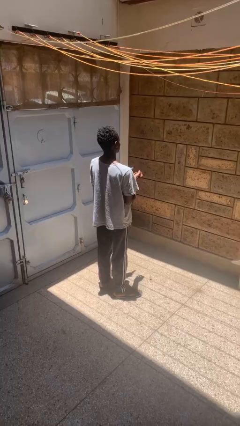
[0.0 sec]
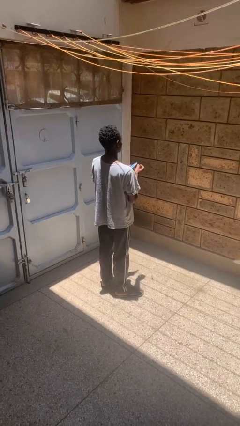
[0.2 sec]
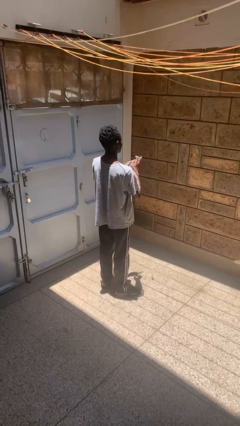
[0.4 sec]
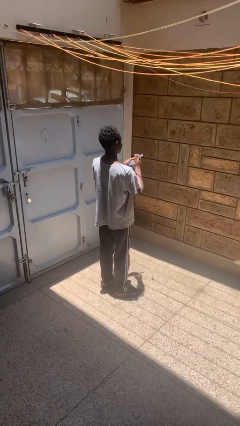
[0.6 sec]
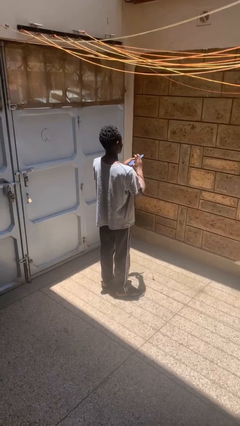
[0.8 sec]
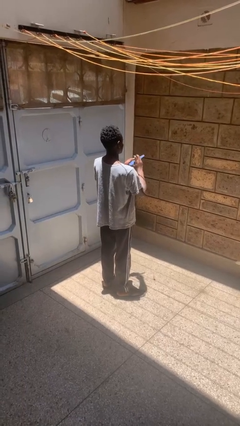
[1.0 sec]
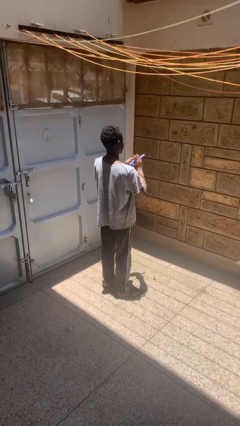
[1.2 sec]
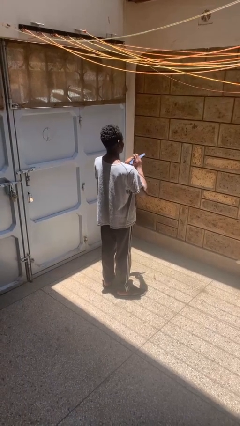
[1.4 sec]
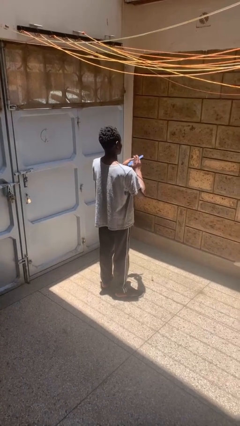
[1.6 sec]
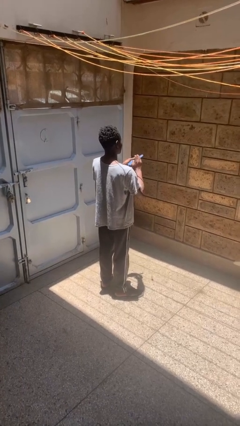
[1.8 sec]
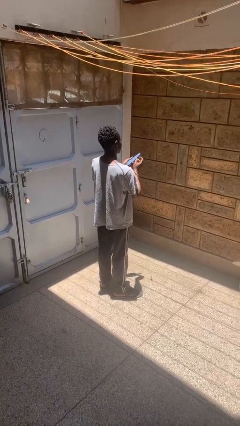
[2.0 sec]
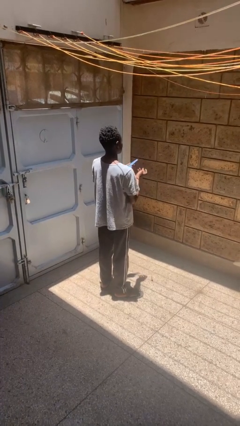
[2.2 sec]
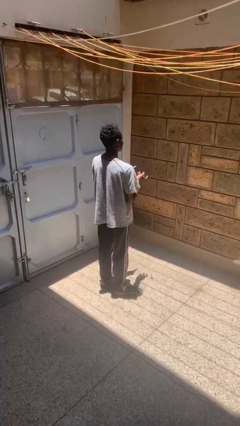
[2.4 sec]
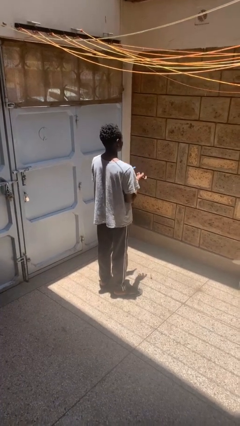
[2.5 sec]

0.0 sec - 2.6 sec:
person files fingernails

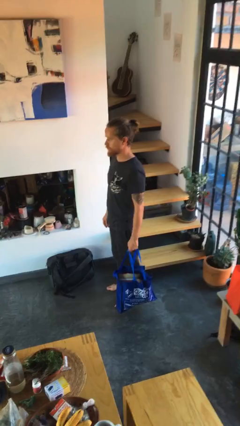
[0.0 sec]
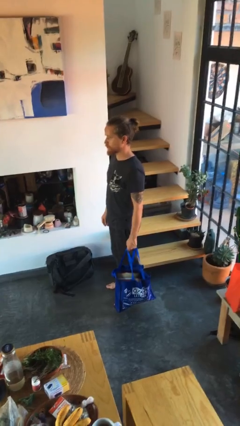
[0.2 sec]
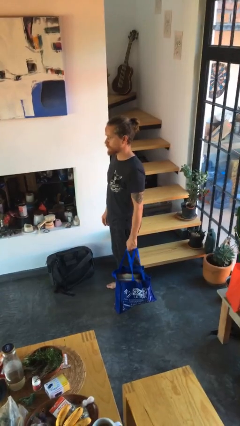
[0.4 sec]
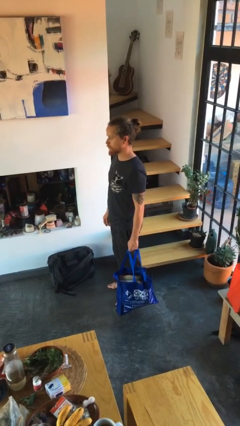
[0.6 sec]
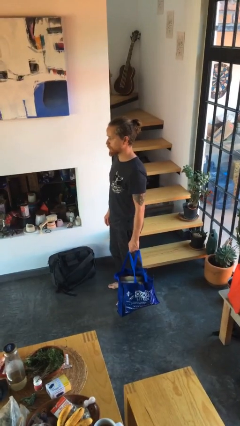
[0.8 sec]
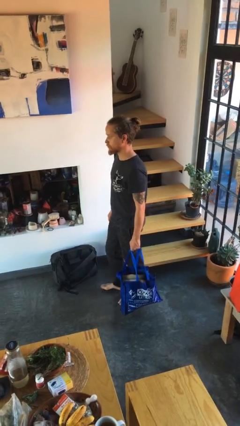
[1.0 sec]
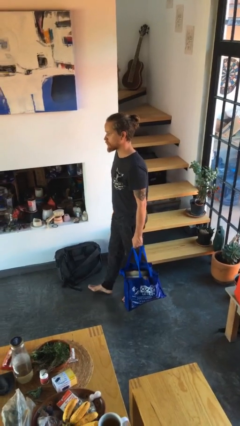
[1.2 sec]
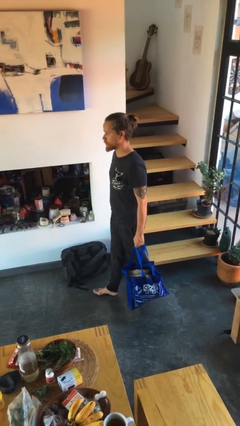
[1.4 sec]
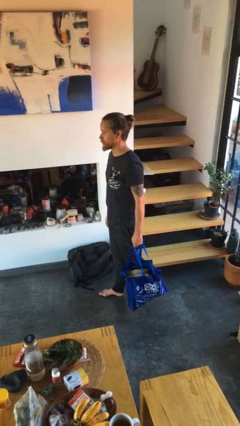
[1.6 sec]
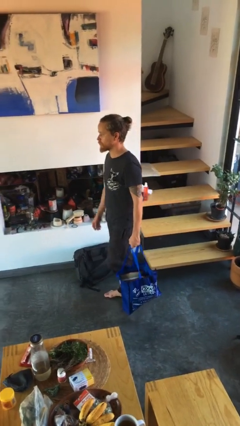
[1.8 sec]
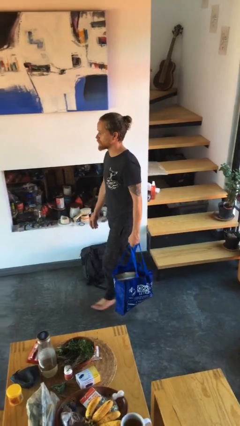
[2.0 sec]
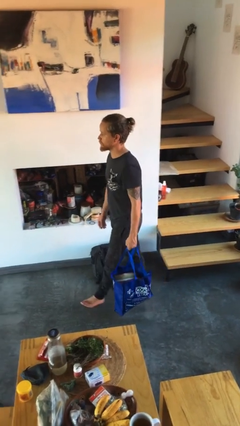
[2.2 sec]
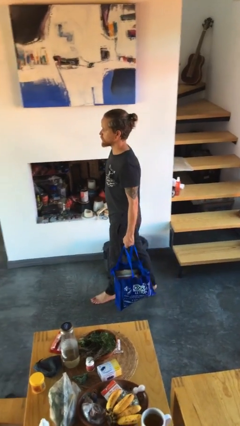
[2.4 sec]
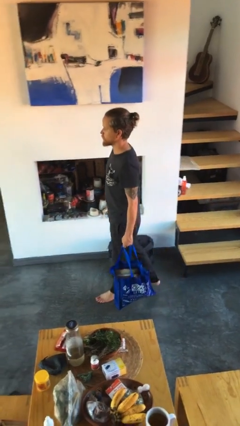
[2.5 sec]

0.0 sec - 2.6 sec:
person carries groceries

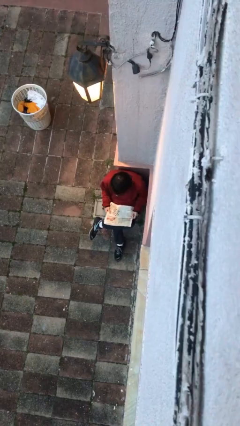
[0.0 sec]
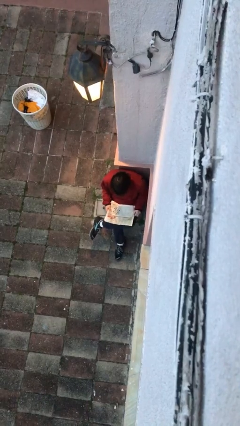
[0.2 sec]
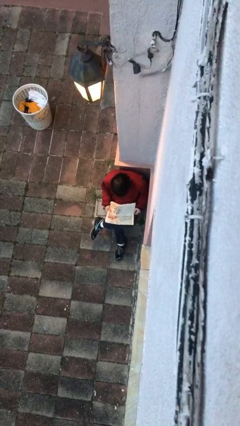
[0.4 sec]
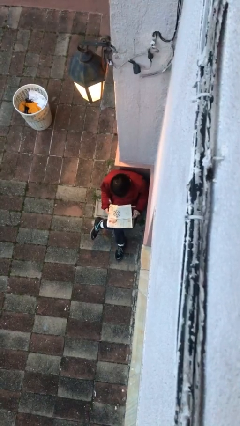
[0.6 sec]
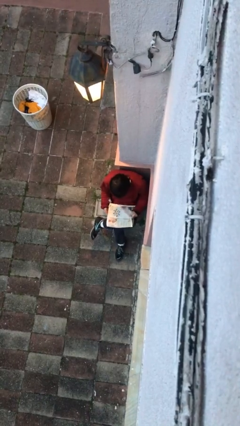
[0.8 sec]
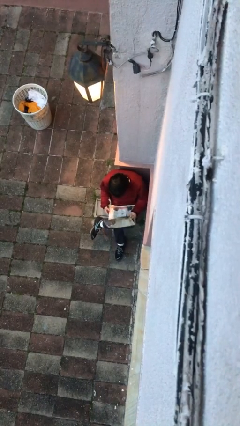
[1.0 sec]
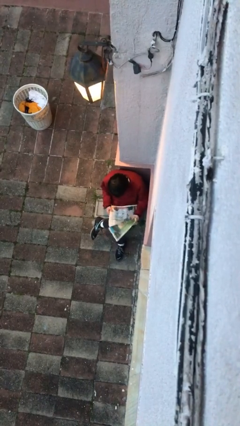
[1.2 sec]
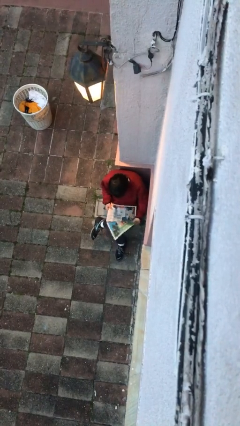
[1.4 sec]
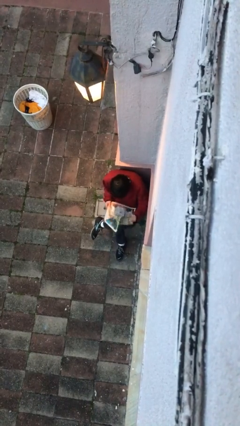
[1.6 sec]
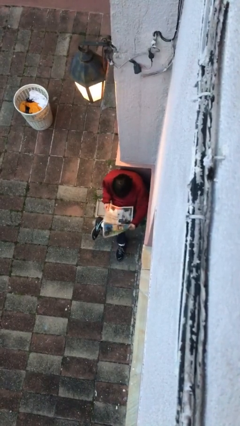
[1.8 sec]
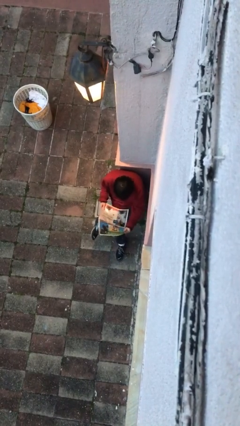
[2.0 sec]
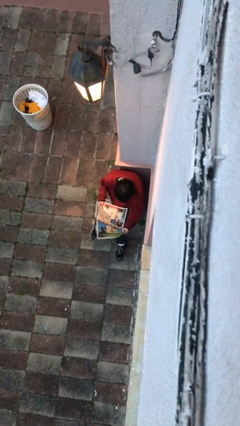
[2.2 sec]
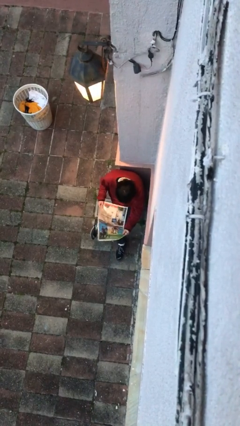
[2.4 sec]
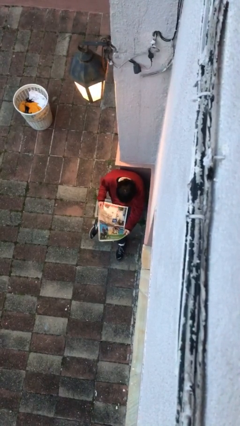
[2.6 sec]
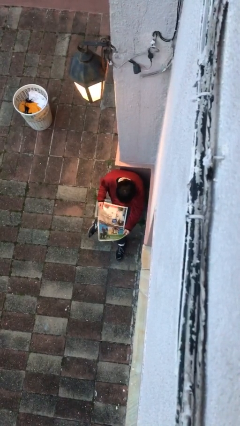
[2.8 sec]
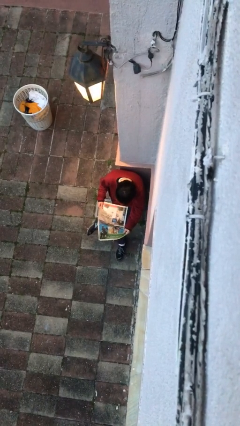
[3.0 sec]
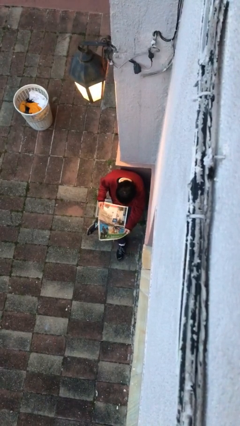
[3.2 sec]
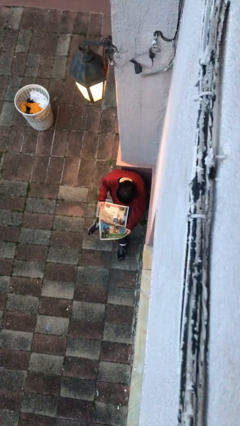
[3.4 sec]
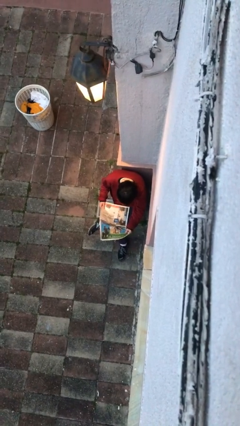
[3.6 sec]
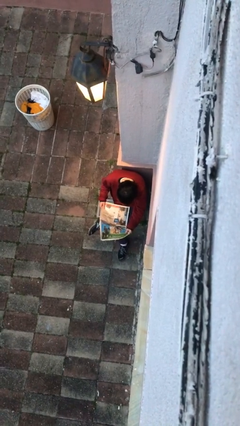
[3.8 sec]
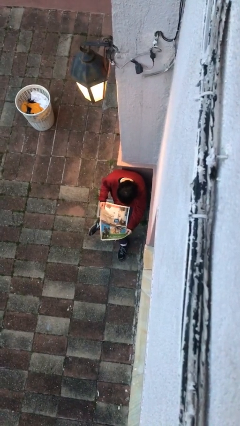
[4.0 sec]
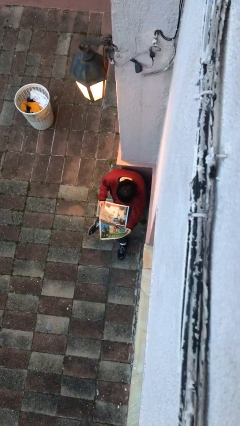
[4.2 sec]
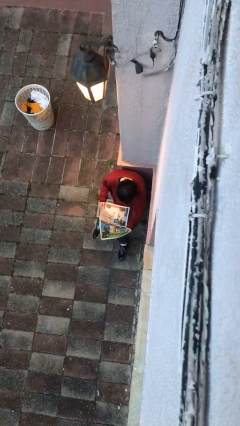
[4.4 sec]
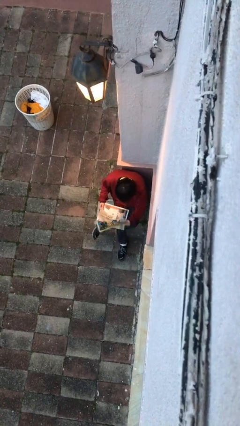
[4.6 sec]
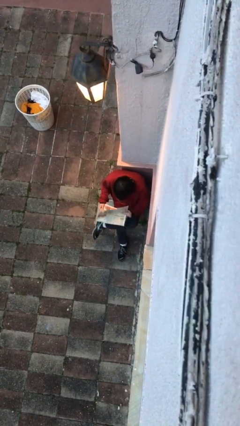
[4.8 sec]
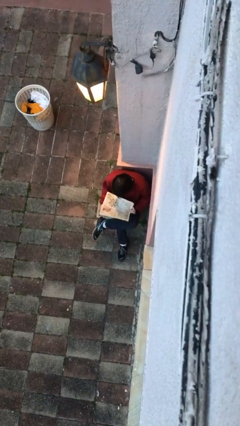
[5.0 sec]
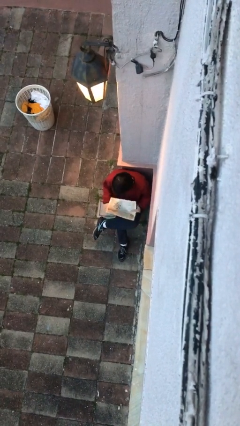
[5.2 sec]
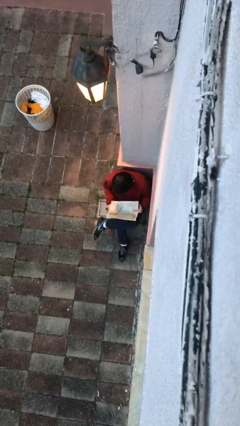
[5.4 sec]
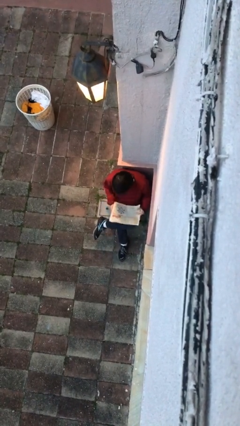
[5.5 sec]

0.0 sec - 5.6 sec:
person reads newspaper

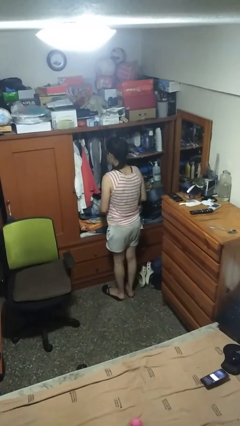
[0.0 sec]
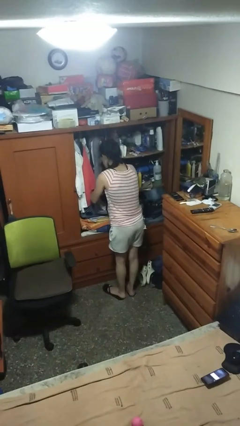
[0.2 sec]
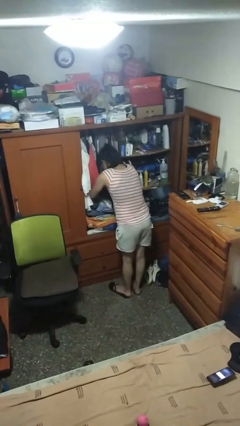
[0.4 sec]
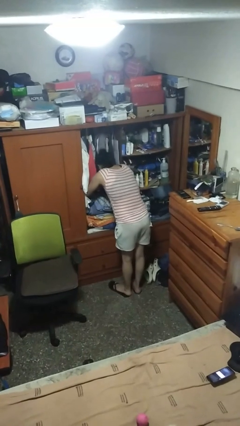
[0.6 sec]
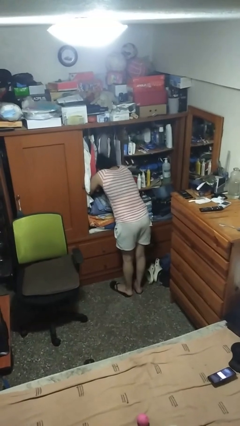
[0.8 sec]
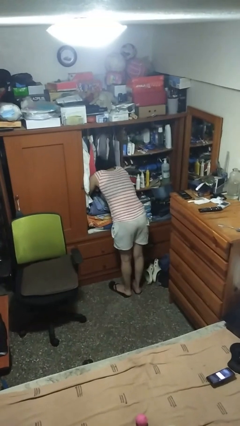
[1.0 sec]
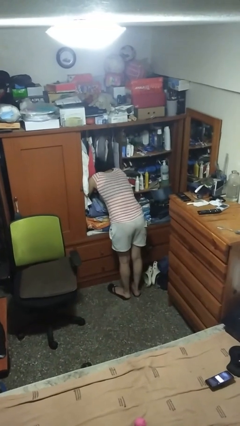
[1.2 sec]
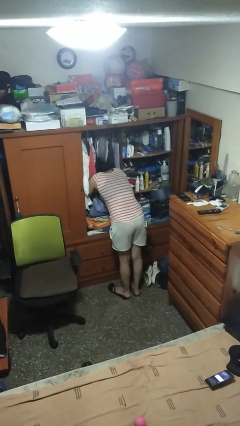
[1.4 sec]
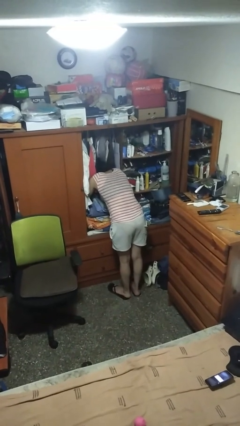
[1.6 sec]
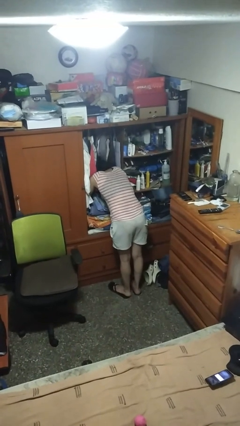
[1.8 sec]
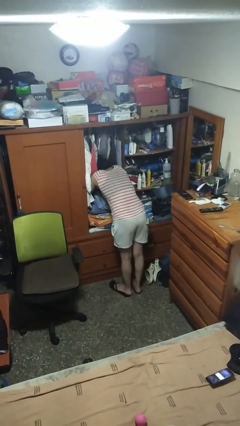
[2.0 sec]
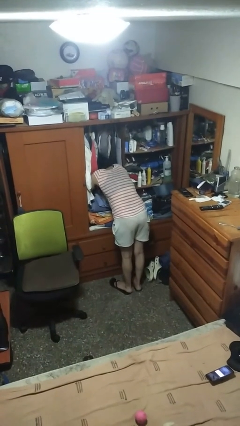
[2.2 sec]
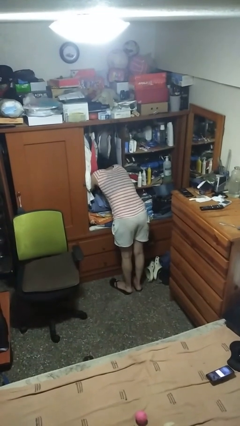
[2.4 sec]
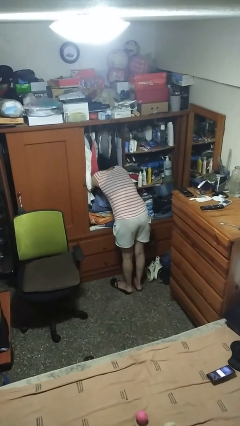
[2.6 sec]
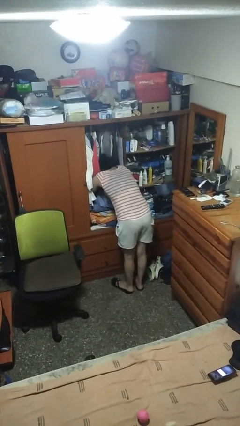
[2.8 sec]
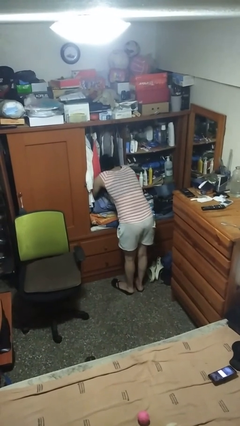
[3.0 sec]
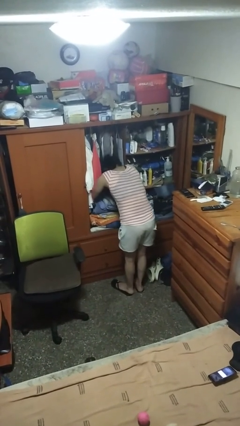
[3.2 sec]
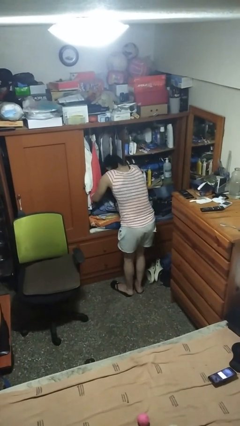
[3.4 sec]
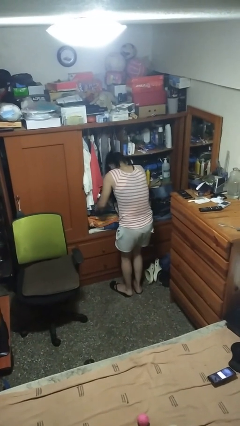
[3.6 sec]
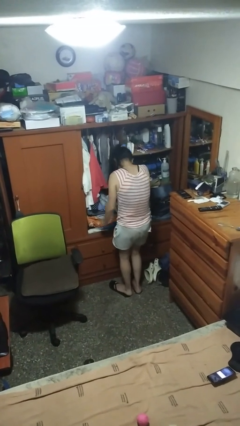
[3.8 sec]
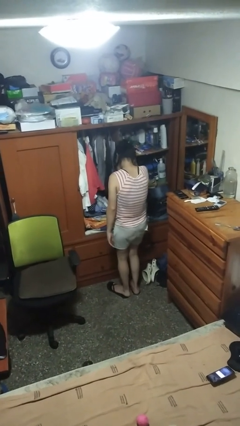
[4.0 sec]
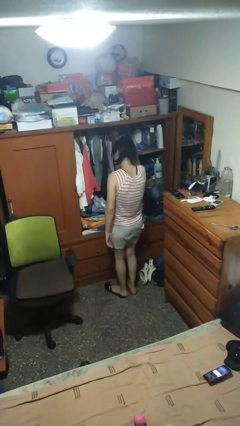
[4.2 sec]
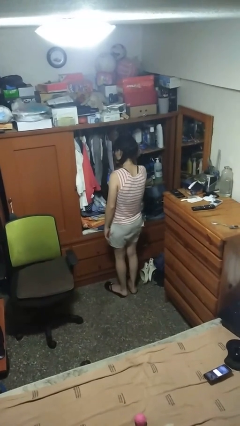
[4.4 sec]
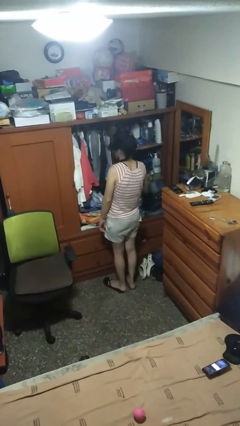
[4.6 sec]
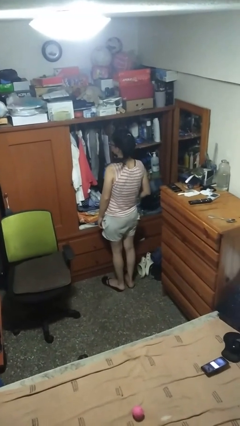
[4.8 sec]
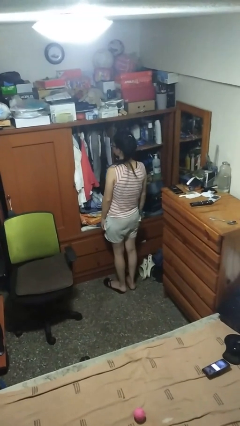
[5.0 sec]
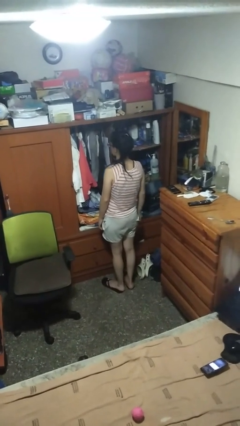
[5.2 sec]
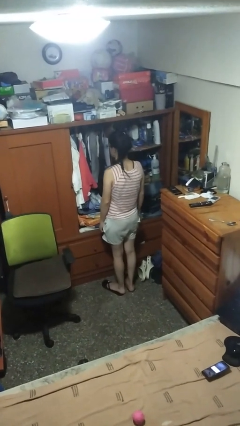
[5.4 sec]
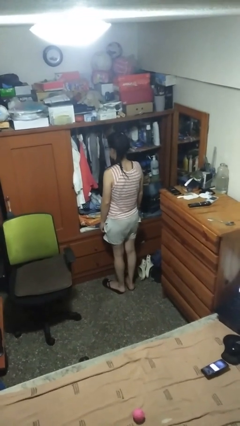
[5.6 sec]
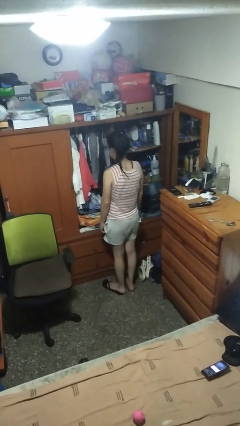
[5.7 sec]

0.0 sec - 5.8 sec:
person searches in cabinet

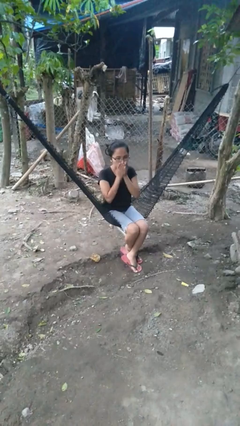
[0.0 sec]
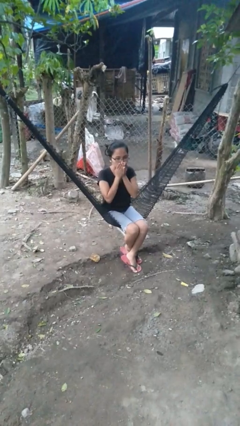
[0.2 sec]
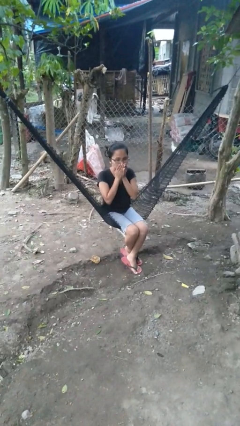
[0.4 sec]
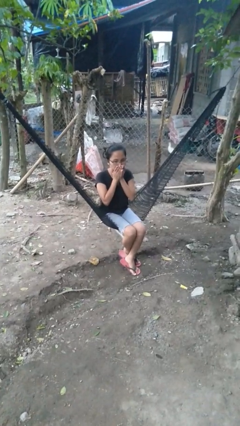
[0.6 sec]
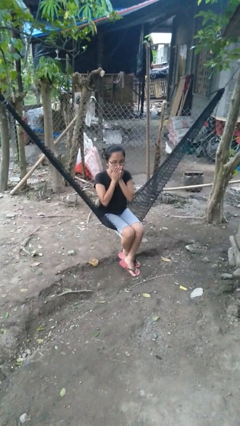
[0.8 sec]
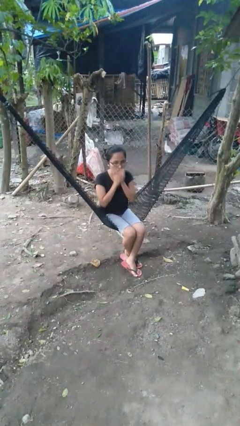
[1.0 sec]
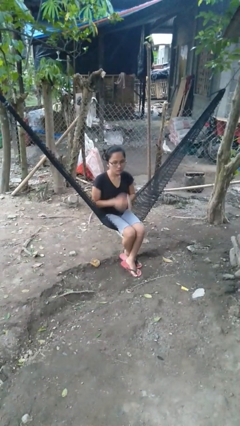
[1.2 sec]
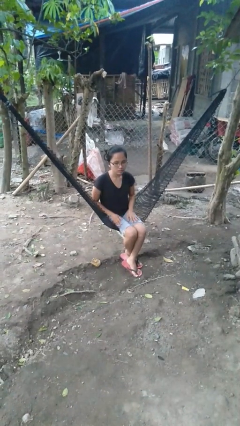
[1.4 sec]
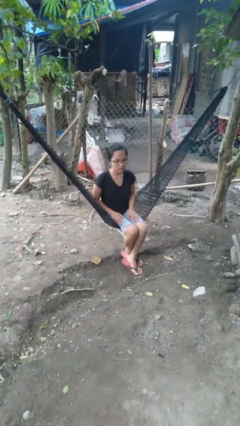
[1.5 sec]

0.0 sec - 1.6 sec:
person blows into hands
